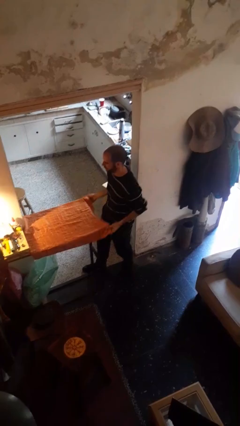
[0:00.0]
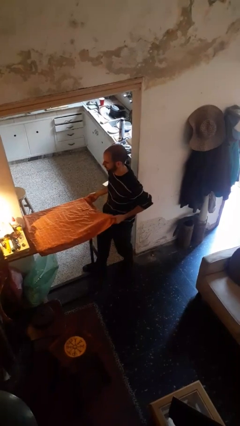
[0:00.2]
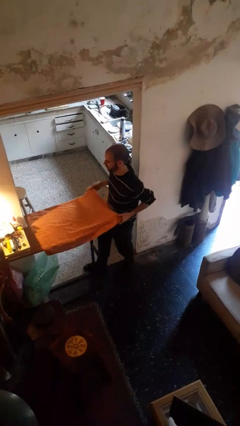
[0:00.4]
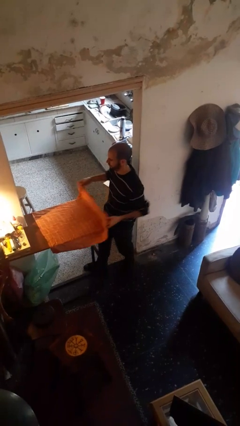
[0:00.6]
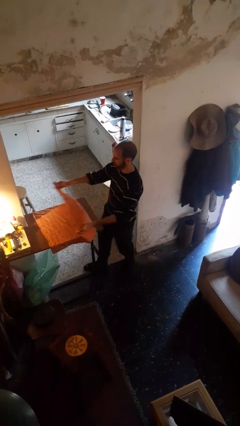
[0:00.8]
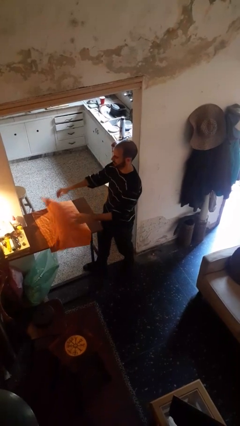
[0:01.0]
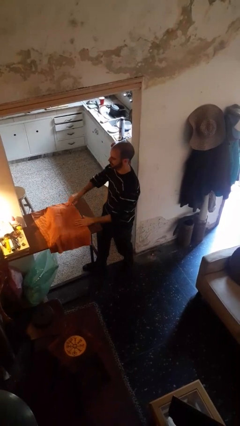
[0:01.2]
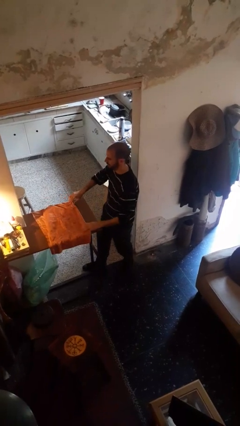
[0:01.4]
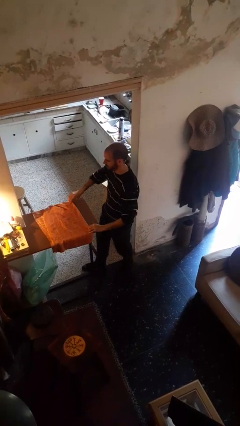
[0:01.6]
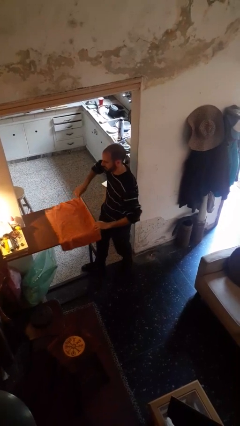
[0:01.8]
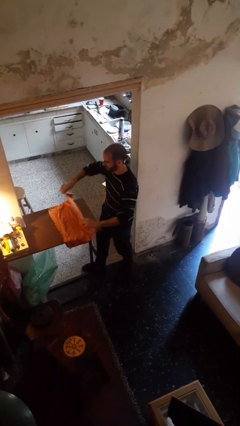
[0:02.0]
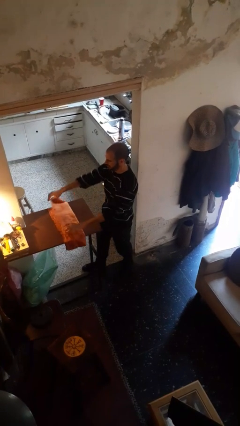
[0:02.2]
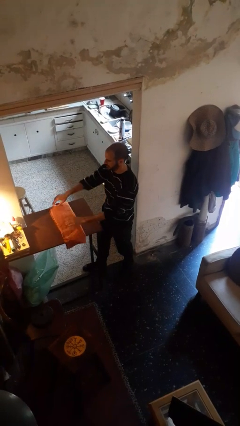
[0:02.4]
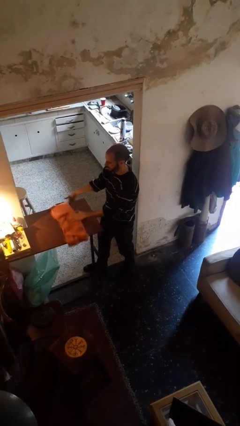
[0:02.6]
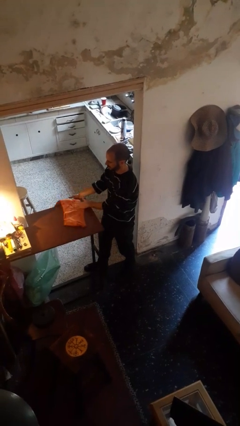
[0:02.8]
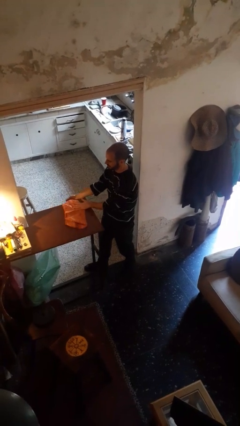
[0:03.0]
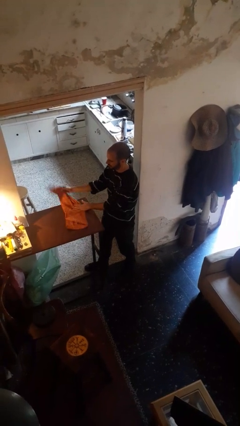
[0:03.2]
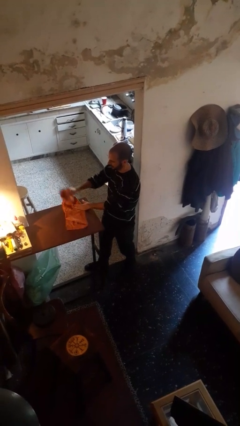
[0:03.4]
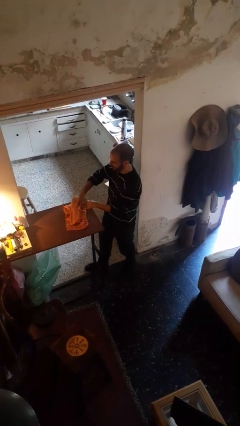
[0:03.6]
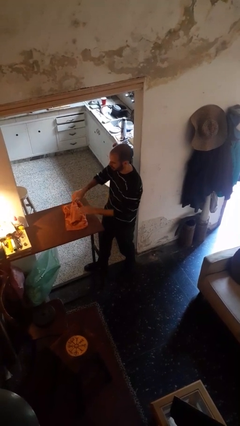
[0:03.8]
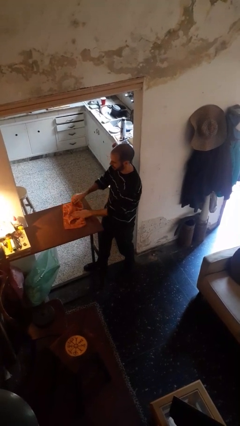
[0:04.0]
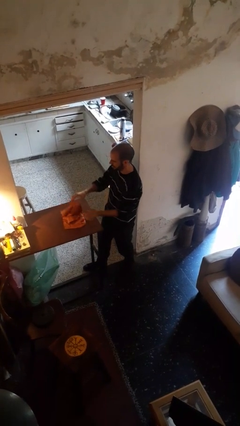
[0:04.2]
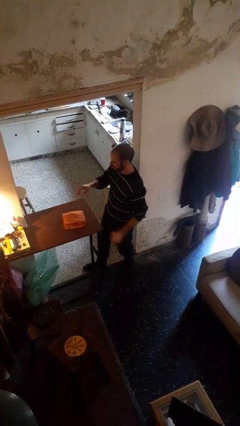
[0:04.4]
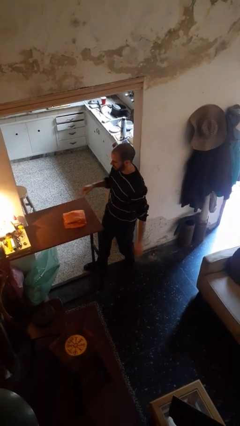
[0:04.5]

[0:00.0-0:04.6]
person folds tablecloth

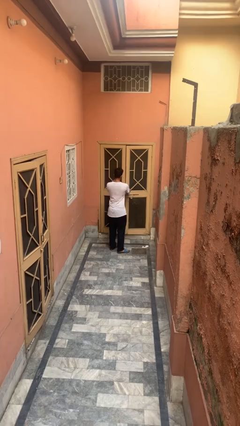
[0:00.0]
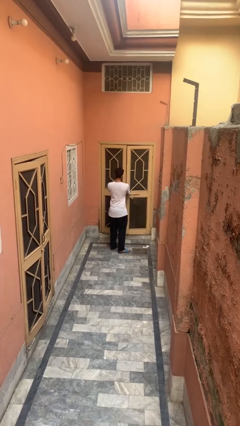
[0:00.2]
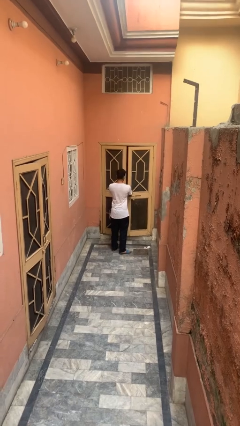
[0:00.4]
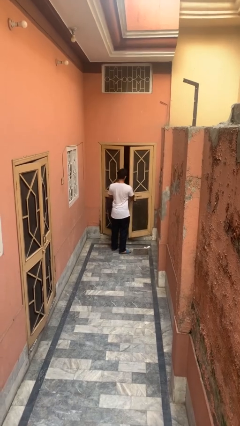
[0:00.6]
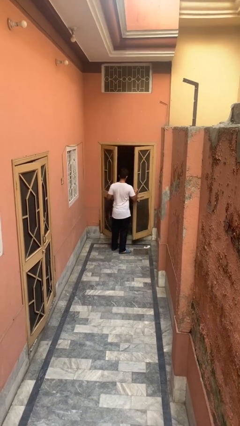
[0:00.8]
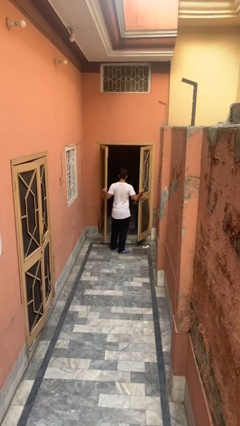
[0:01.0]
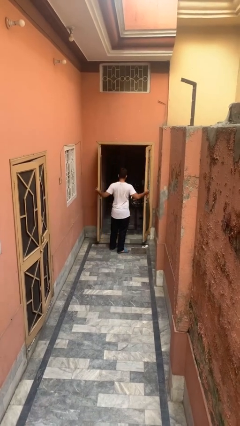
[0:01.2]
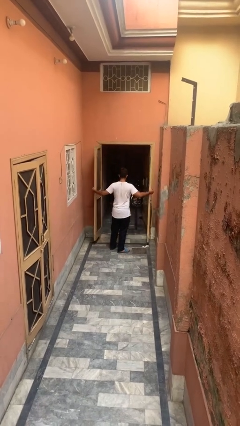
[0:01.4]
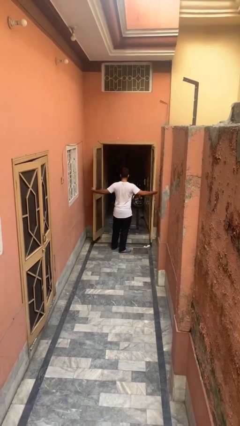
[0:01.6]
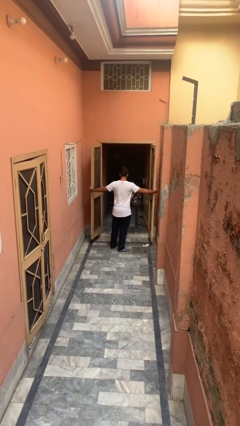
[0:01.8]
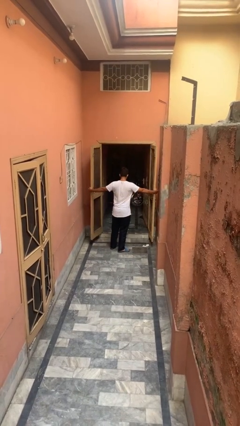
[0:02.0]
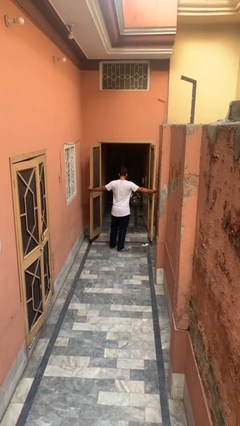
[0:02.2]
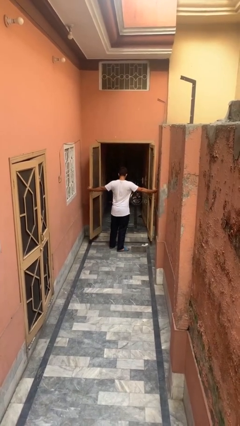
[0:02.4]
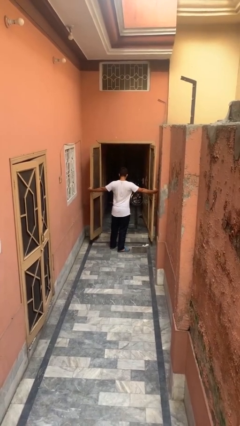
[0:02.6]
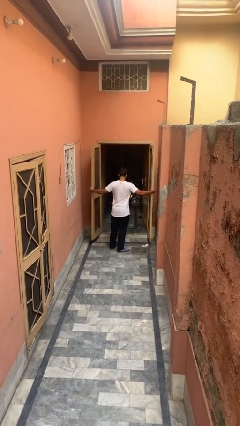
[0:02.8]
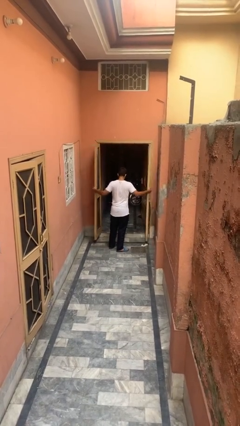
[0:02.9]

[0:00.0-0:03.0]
person opens gate

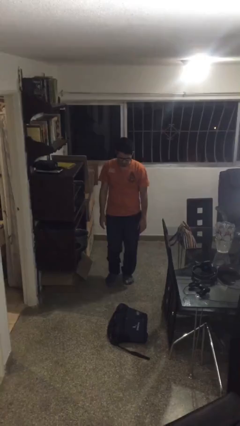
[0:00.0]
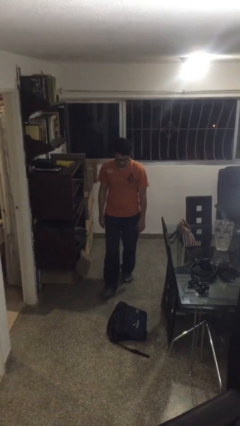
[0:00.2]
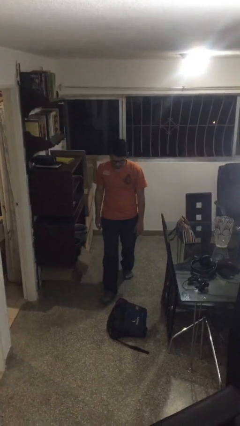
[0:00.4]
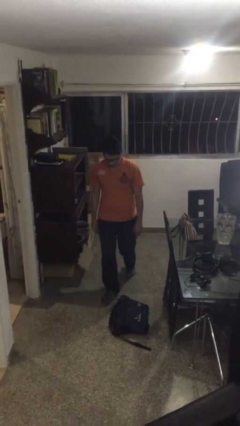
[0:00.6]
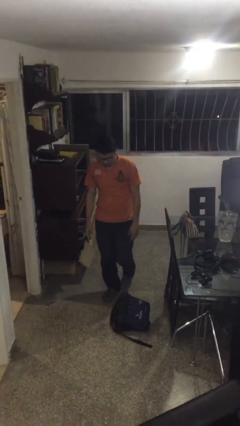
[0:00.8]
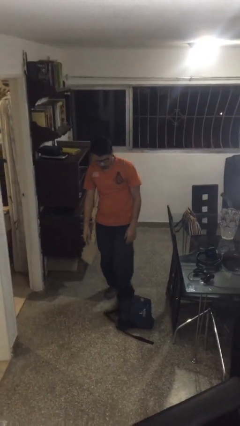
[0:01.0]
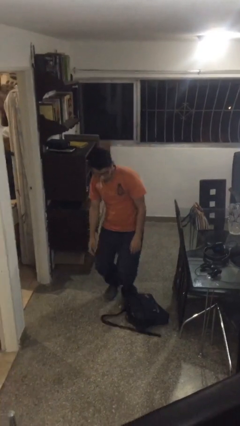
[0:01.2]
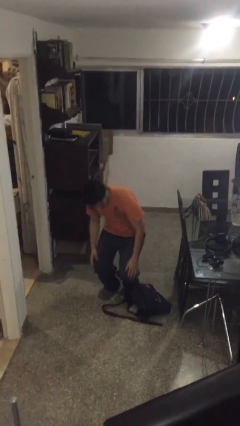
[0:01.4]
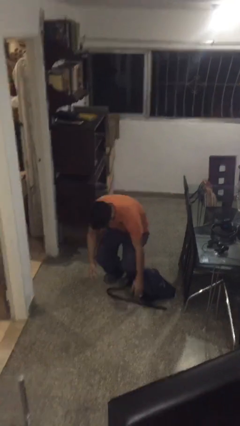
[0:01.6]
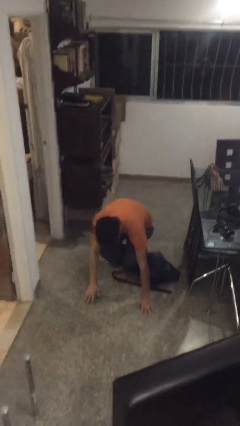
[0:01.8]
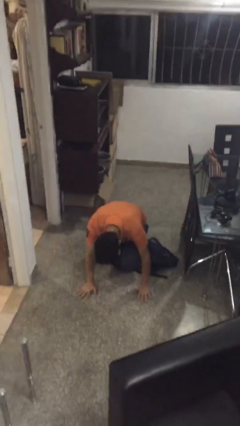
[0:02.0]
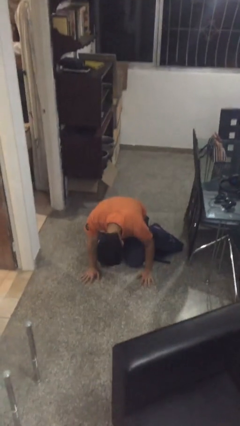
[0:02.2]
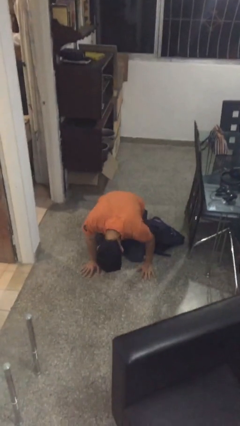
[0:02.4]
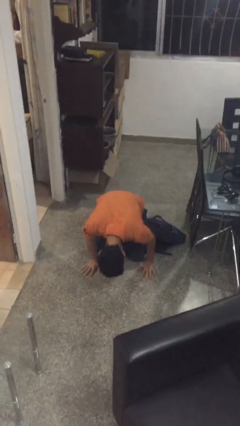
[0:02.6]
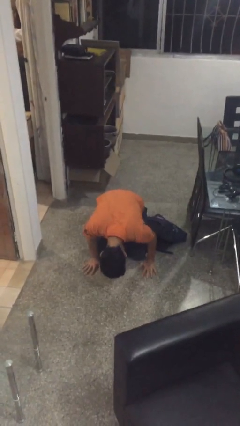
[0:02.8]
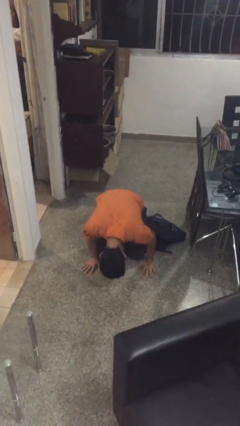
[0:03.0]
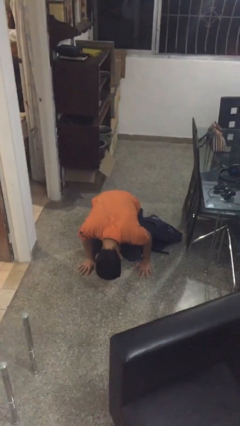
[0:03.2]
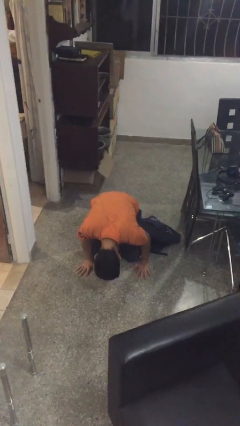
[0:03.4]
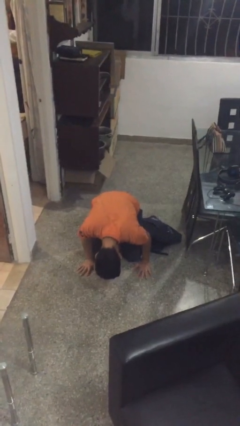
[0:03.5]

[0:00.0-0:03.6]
person trips on object on floor

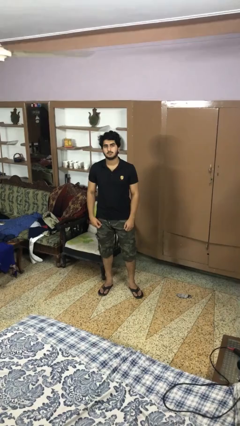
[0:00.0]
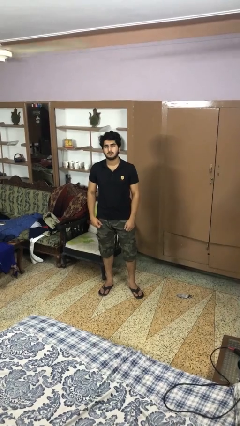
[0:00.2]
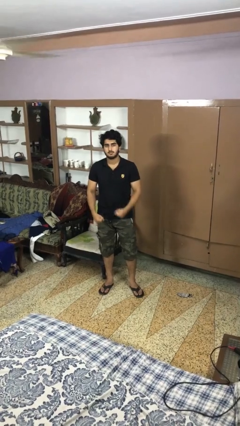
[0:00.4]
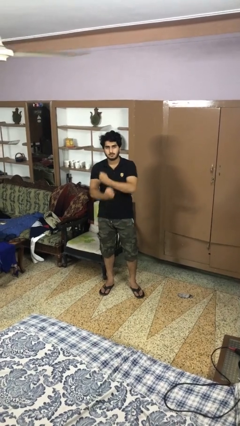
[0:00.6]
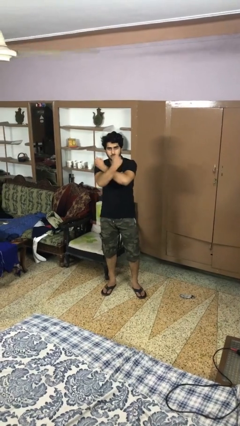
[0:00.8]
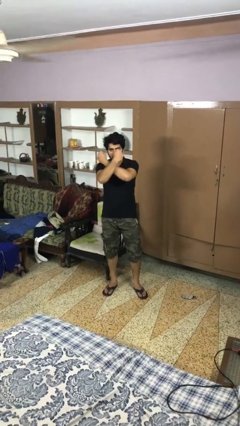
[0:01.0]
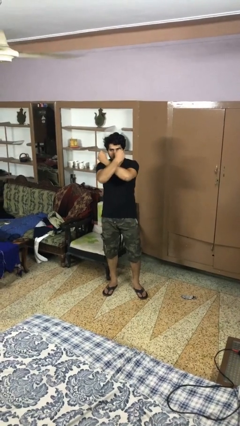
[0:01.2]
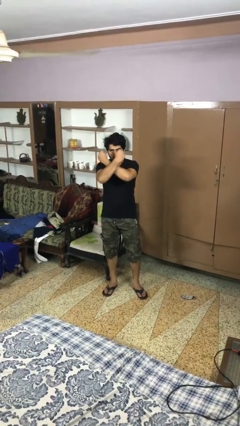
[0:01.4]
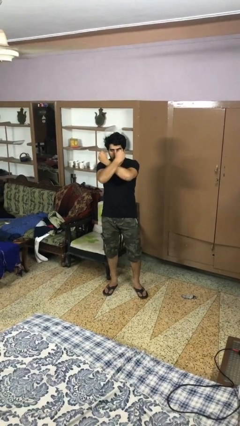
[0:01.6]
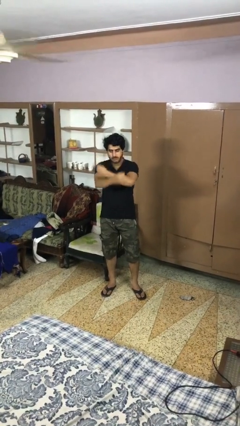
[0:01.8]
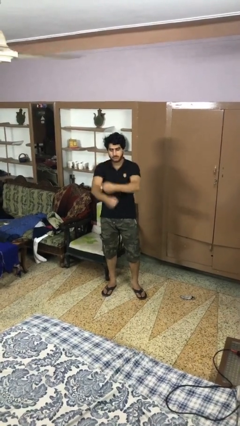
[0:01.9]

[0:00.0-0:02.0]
person gestures arms x

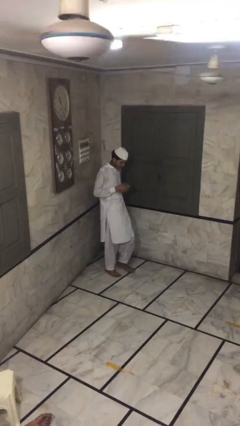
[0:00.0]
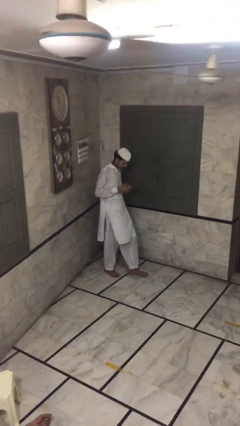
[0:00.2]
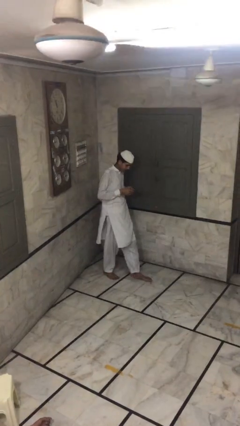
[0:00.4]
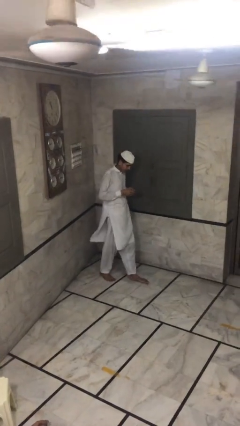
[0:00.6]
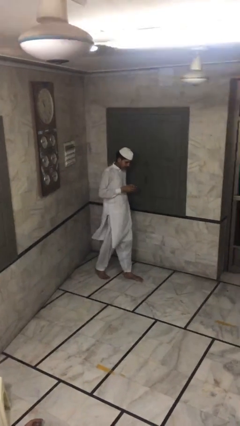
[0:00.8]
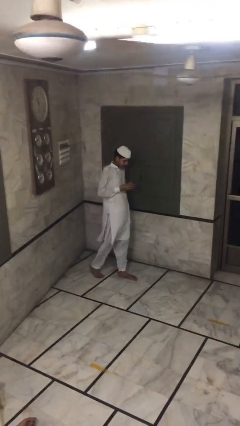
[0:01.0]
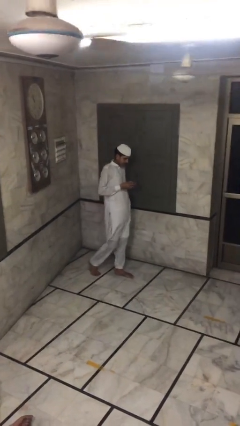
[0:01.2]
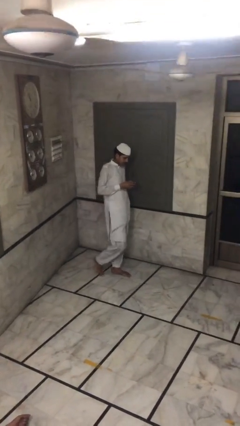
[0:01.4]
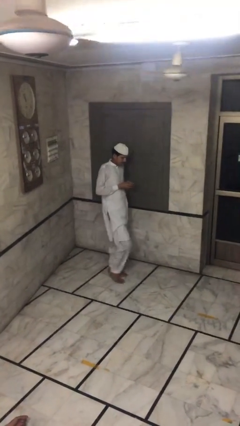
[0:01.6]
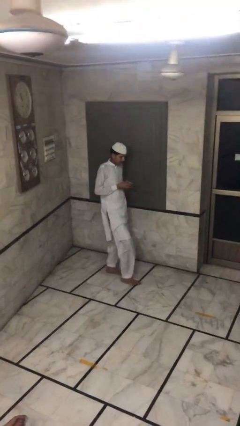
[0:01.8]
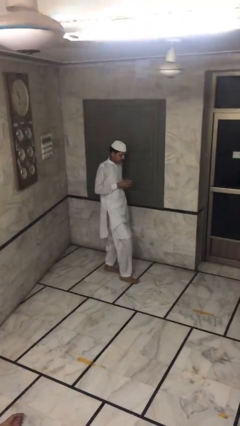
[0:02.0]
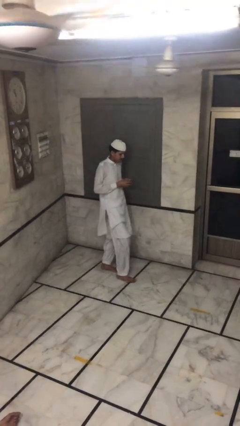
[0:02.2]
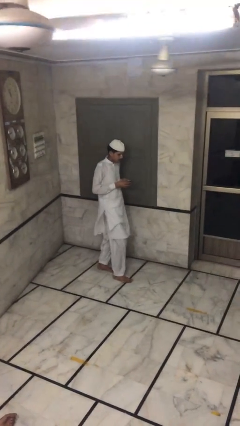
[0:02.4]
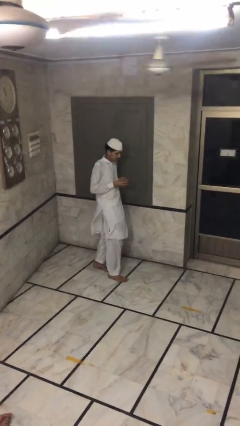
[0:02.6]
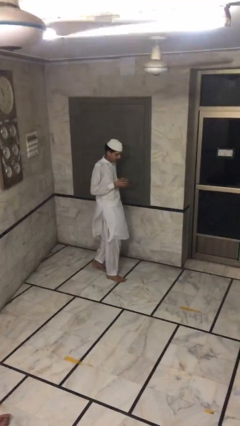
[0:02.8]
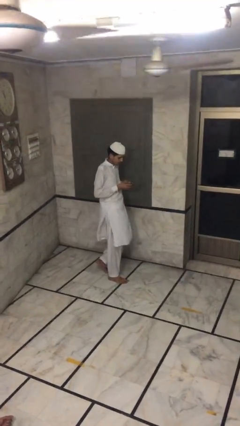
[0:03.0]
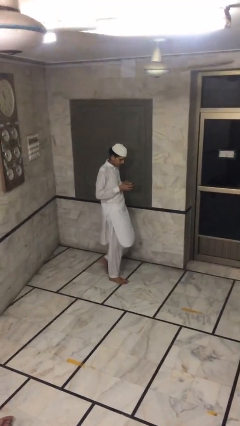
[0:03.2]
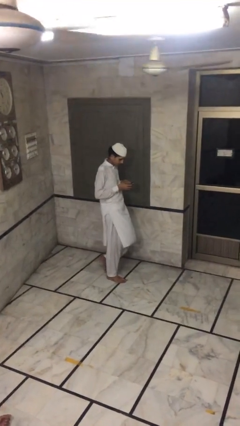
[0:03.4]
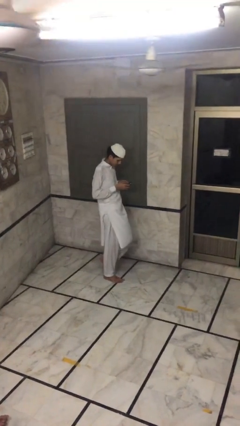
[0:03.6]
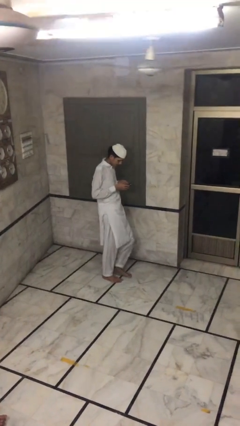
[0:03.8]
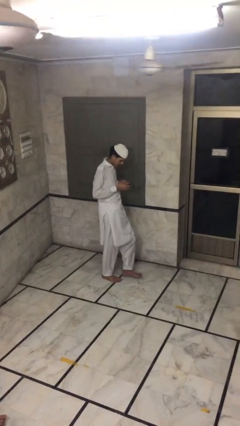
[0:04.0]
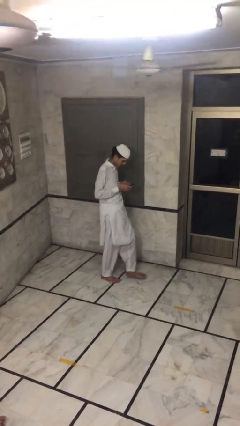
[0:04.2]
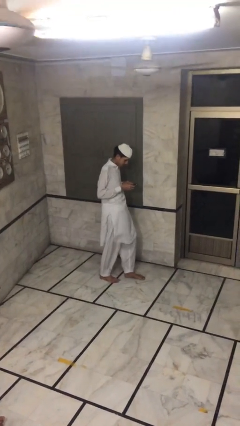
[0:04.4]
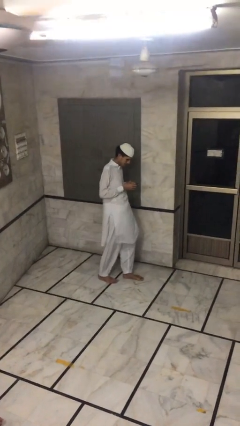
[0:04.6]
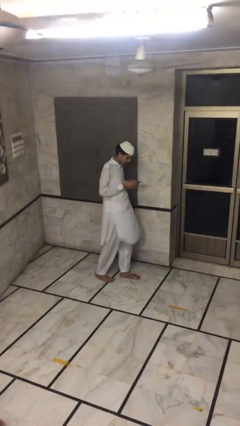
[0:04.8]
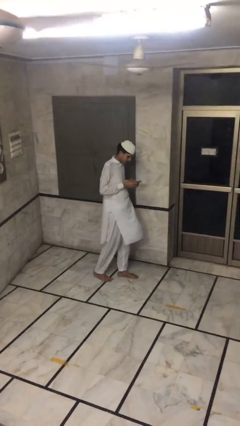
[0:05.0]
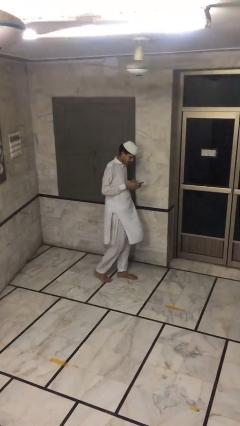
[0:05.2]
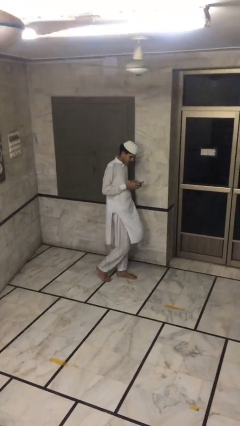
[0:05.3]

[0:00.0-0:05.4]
person texts on phone
